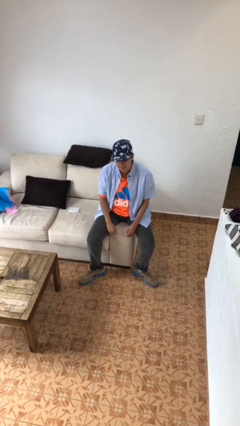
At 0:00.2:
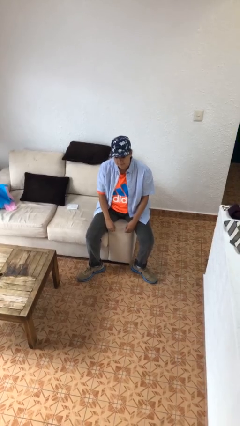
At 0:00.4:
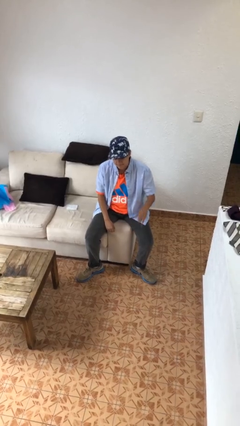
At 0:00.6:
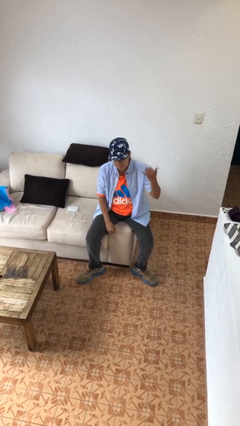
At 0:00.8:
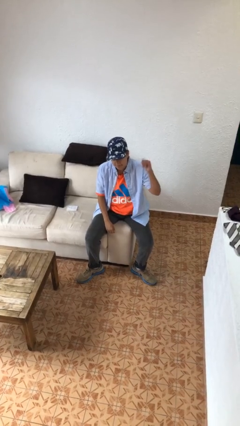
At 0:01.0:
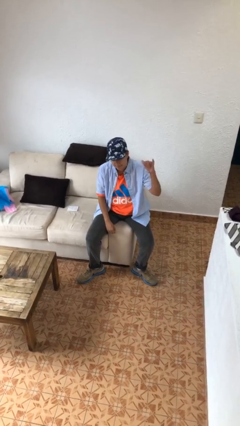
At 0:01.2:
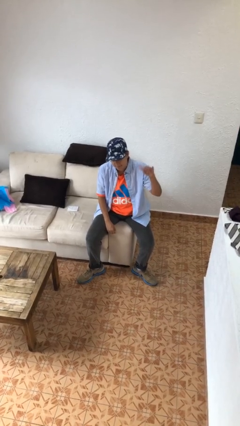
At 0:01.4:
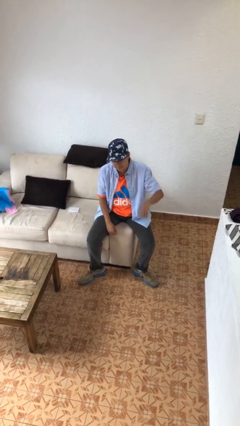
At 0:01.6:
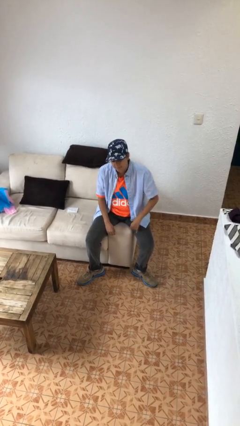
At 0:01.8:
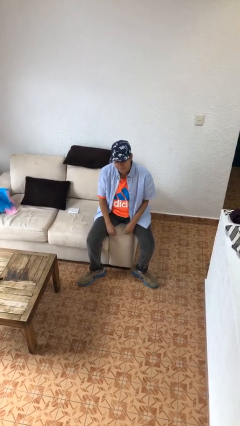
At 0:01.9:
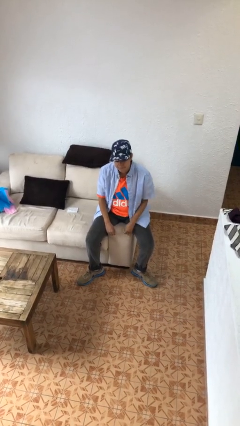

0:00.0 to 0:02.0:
person gestures hang loose

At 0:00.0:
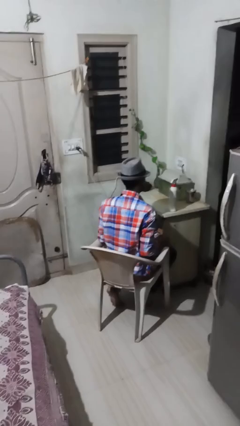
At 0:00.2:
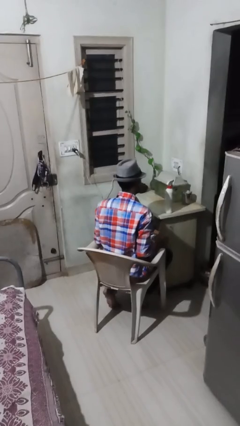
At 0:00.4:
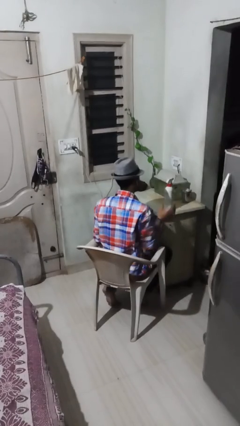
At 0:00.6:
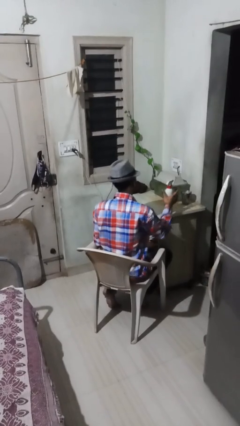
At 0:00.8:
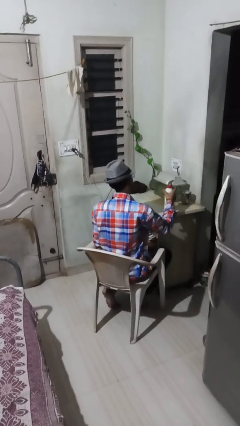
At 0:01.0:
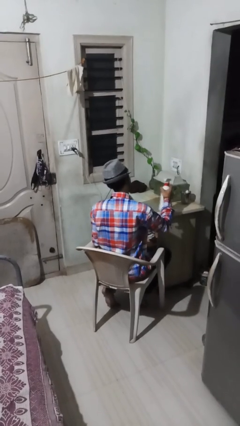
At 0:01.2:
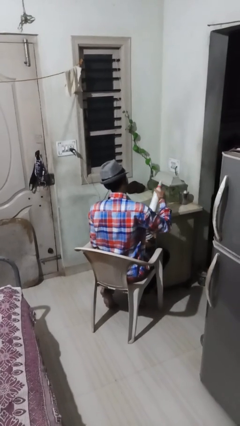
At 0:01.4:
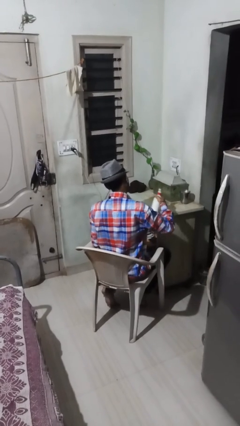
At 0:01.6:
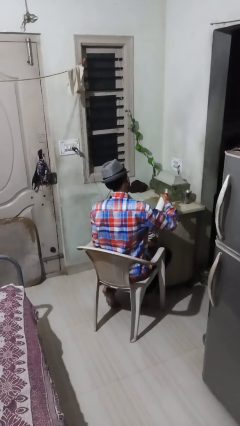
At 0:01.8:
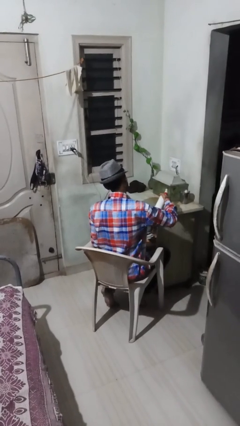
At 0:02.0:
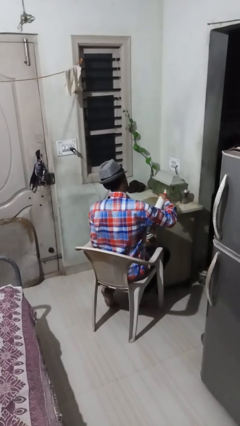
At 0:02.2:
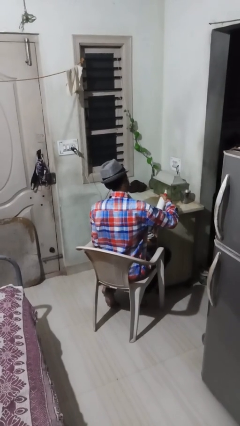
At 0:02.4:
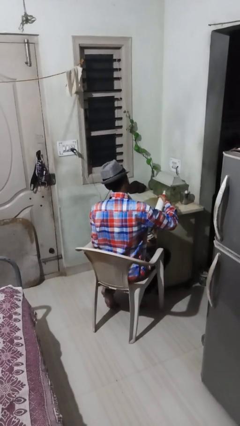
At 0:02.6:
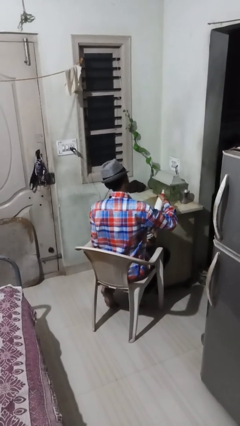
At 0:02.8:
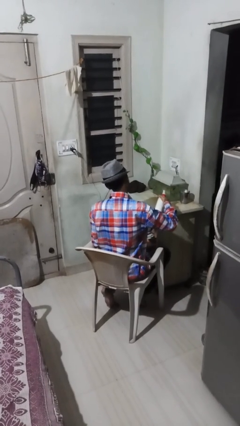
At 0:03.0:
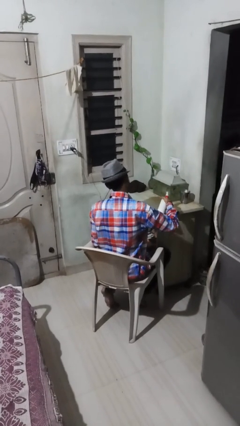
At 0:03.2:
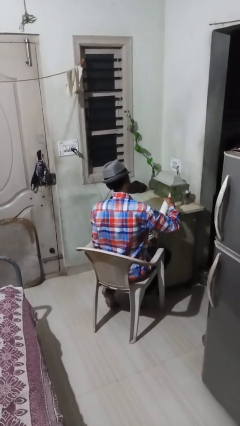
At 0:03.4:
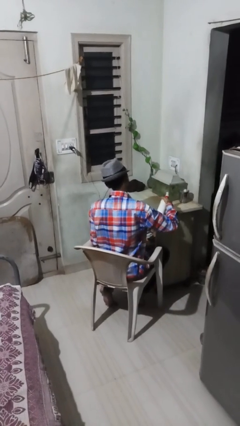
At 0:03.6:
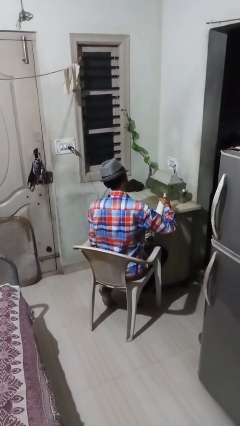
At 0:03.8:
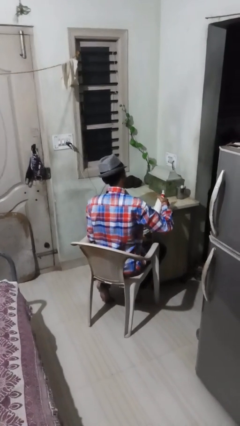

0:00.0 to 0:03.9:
person sprays from bottle

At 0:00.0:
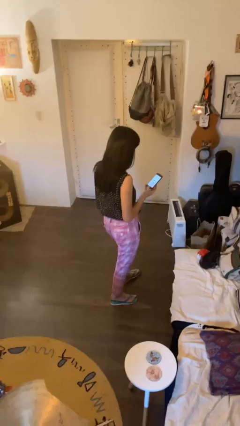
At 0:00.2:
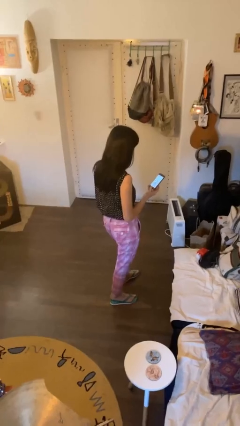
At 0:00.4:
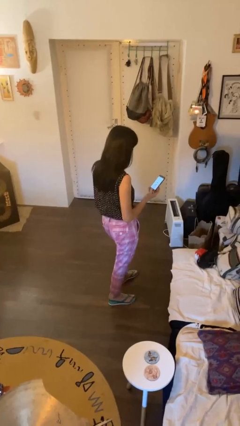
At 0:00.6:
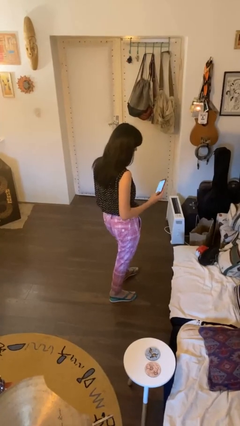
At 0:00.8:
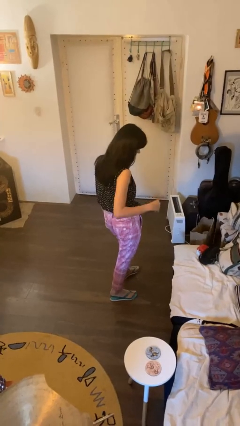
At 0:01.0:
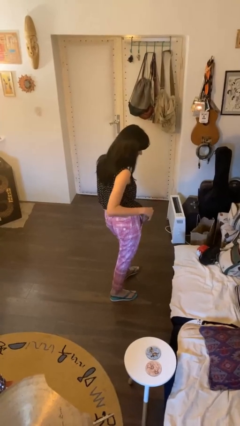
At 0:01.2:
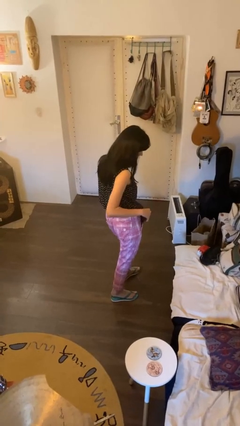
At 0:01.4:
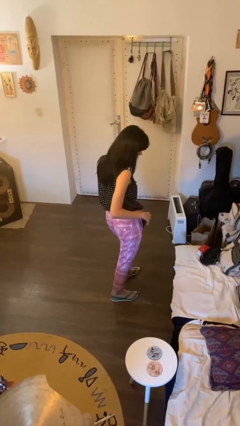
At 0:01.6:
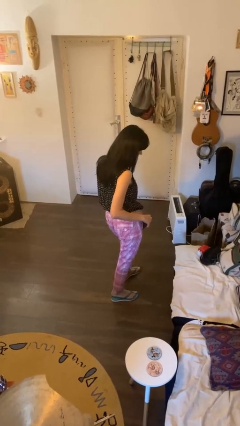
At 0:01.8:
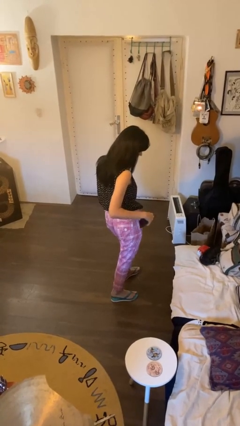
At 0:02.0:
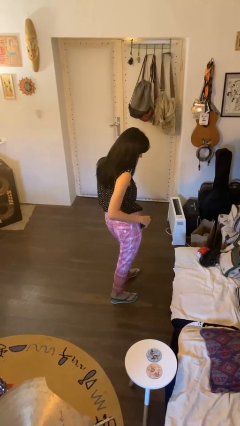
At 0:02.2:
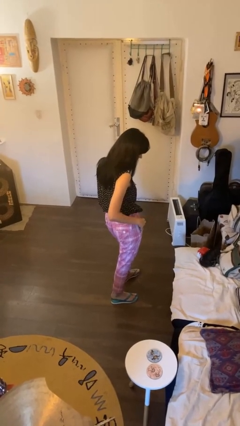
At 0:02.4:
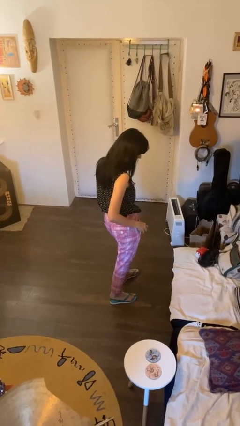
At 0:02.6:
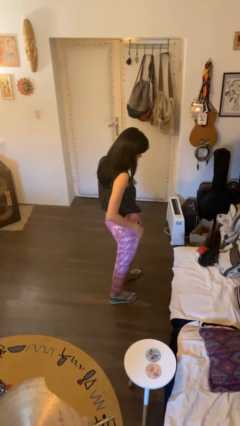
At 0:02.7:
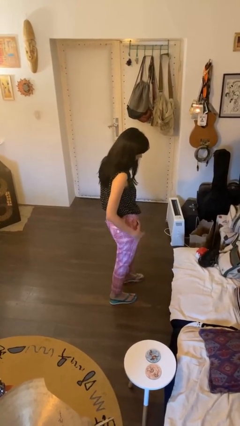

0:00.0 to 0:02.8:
person puts phone into pocket

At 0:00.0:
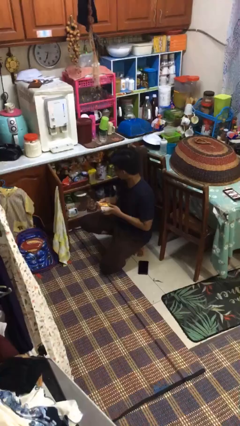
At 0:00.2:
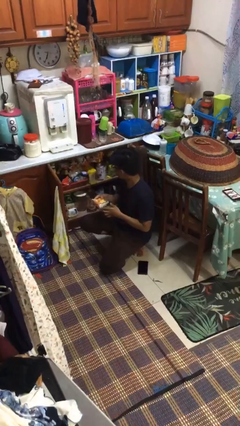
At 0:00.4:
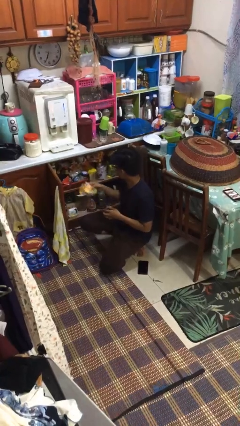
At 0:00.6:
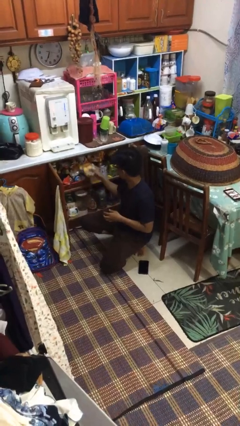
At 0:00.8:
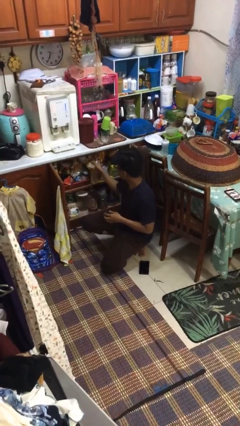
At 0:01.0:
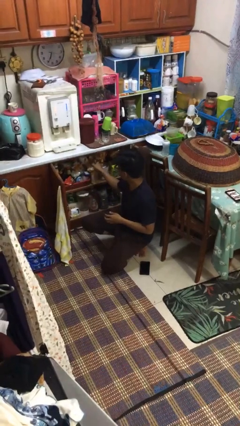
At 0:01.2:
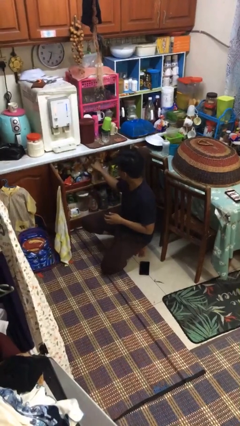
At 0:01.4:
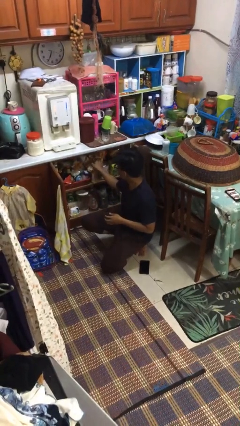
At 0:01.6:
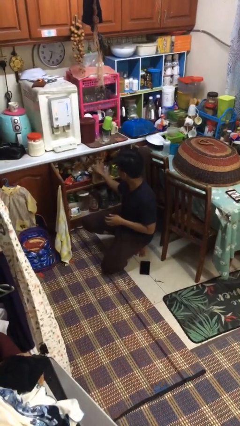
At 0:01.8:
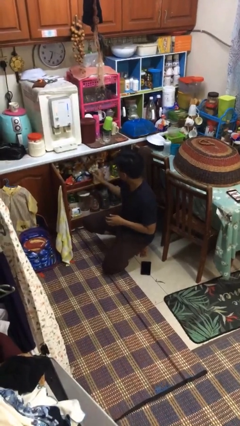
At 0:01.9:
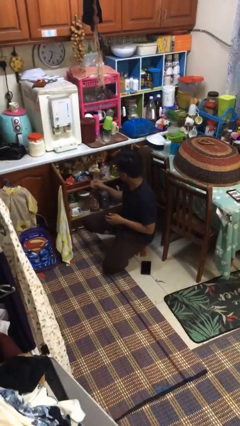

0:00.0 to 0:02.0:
person puts object in cabinet

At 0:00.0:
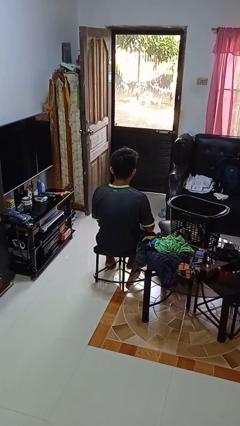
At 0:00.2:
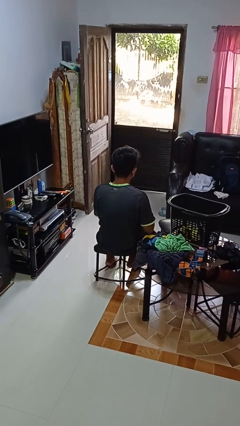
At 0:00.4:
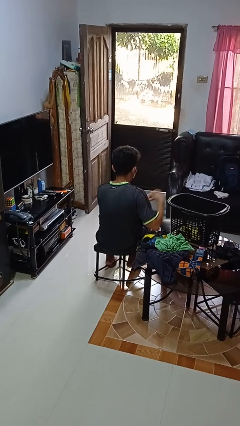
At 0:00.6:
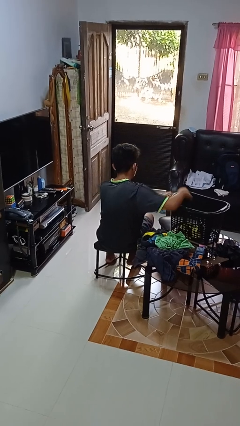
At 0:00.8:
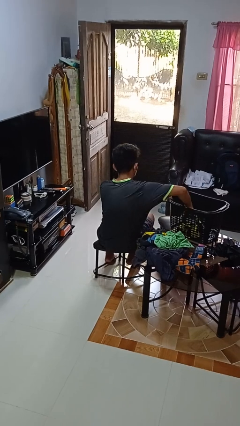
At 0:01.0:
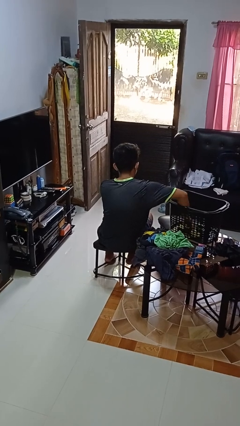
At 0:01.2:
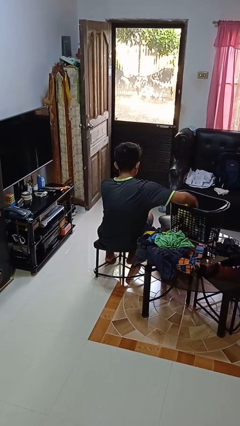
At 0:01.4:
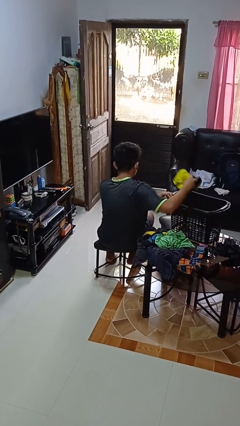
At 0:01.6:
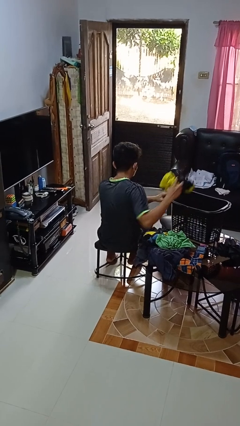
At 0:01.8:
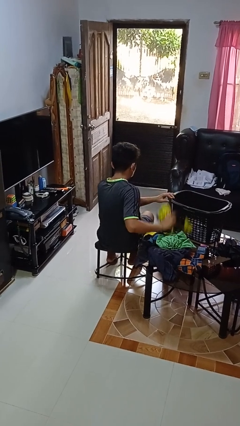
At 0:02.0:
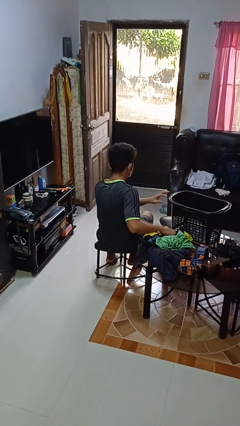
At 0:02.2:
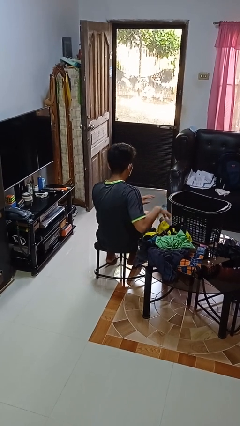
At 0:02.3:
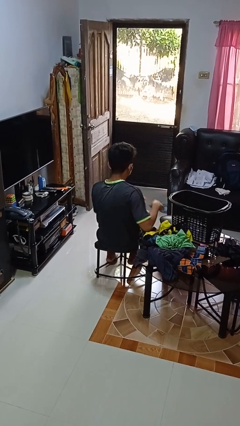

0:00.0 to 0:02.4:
person takes object from basket
